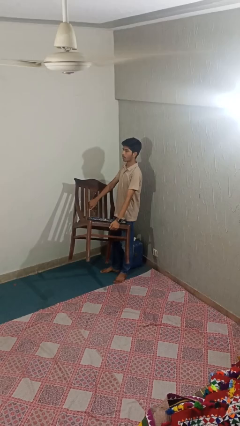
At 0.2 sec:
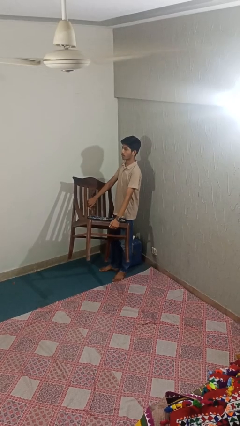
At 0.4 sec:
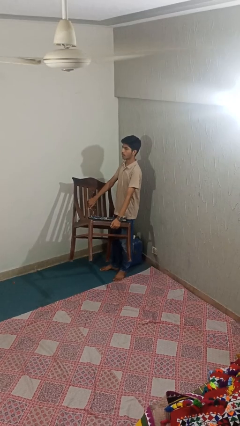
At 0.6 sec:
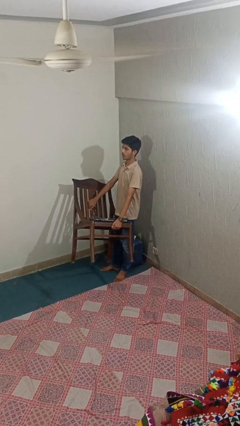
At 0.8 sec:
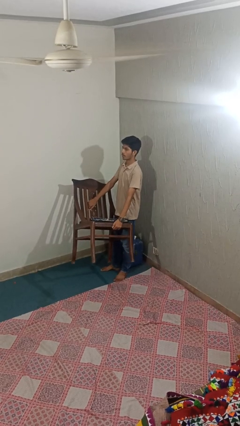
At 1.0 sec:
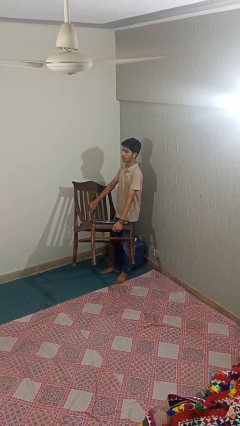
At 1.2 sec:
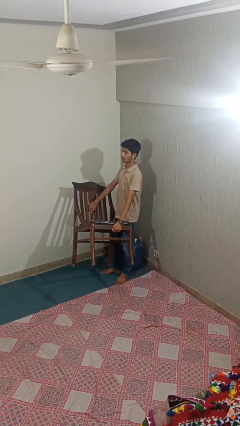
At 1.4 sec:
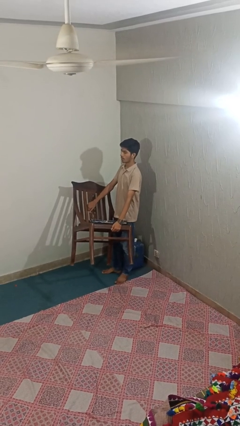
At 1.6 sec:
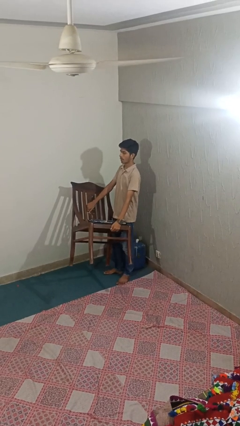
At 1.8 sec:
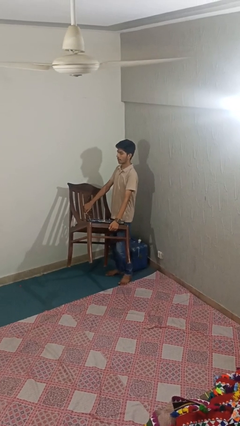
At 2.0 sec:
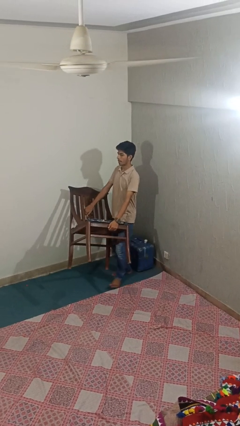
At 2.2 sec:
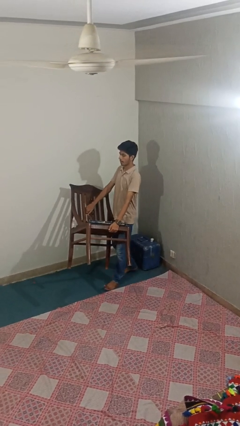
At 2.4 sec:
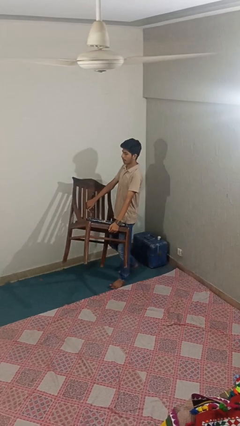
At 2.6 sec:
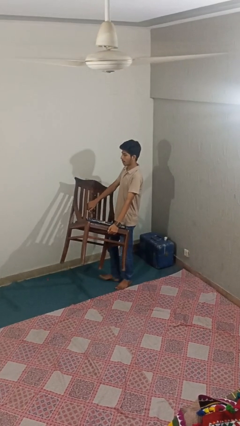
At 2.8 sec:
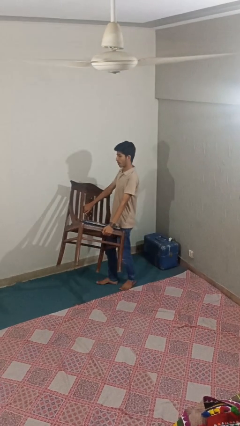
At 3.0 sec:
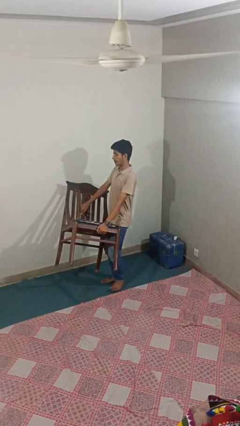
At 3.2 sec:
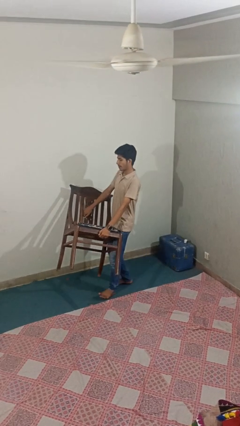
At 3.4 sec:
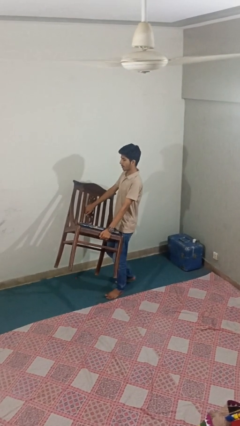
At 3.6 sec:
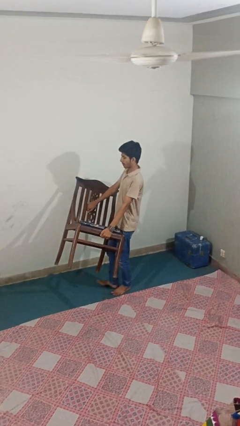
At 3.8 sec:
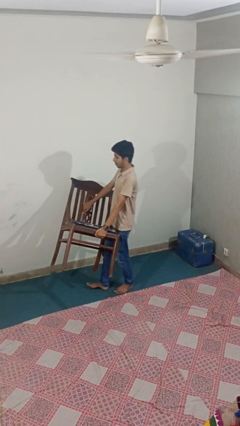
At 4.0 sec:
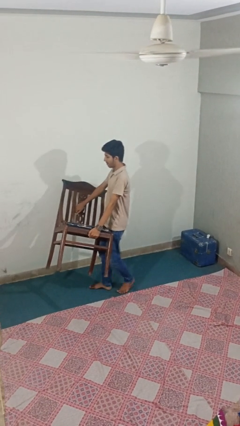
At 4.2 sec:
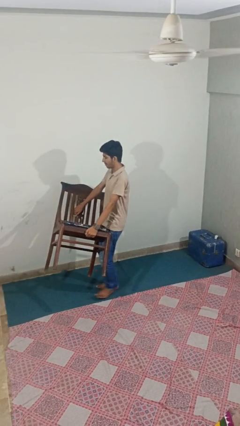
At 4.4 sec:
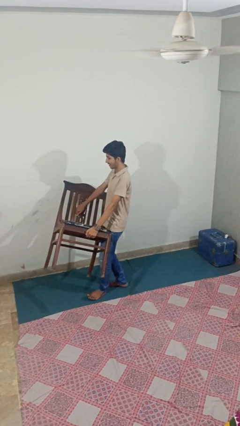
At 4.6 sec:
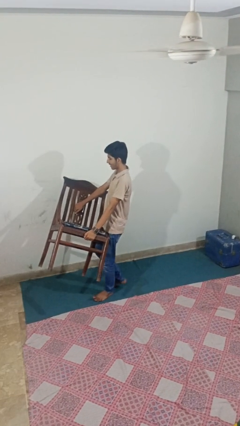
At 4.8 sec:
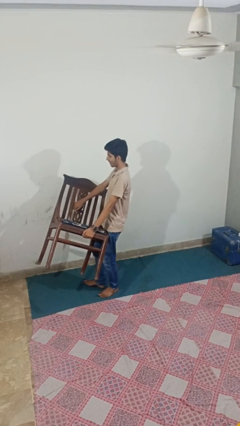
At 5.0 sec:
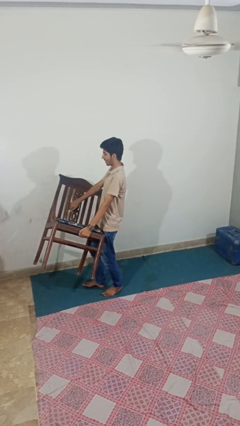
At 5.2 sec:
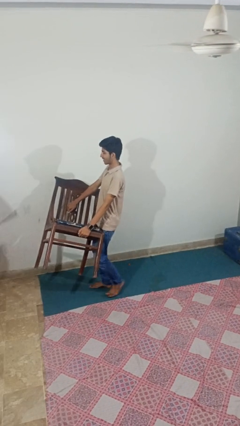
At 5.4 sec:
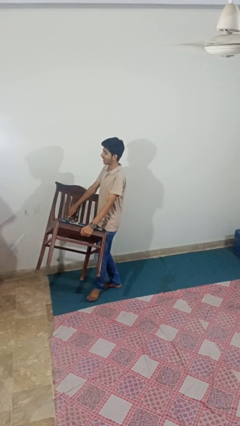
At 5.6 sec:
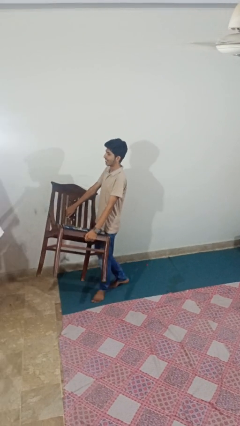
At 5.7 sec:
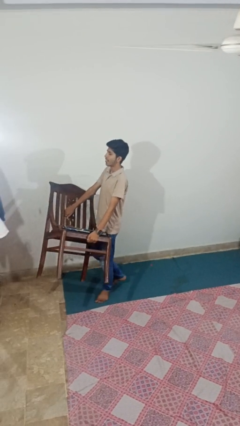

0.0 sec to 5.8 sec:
person carries furniture

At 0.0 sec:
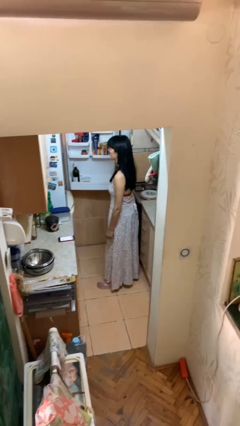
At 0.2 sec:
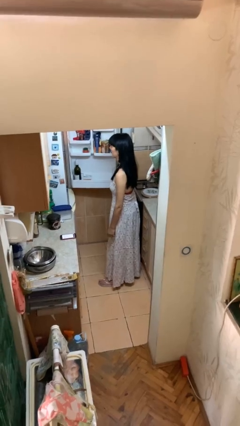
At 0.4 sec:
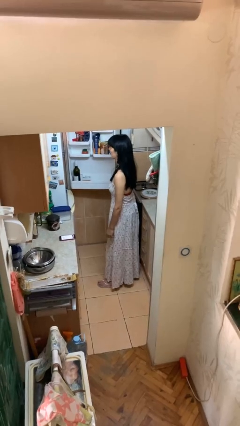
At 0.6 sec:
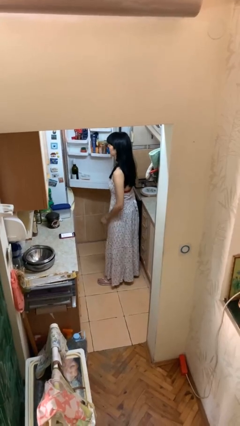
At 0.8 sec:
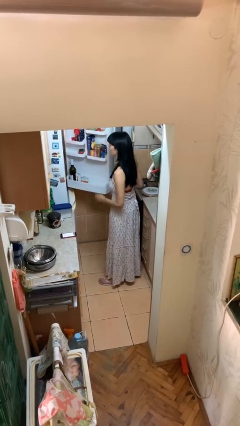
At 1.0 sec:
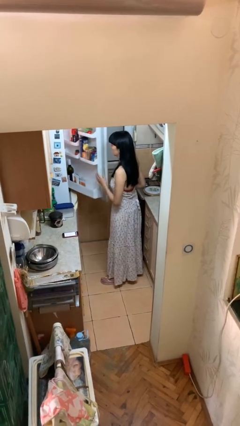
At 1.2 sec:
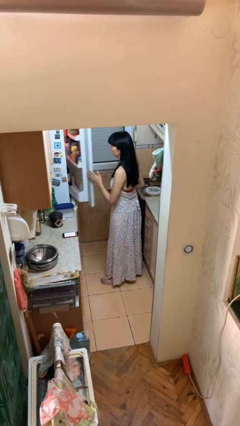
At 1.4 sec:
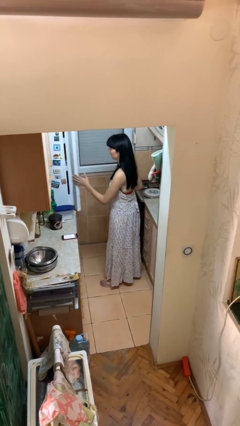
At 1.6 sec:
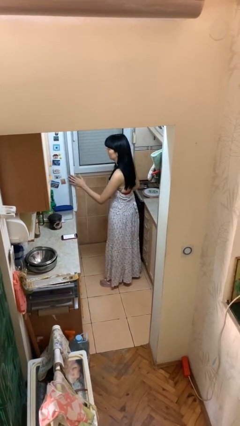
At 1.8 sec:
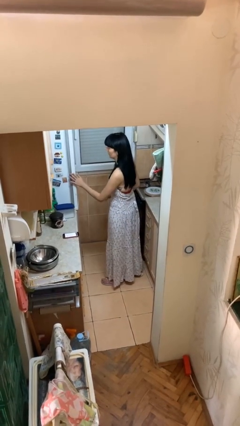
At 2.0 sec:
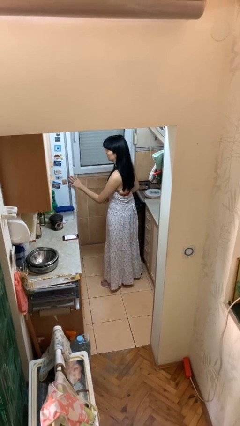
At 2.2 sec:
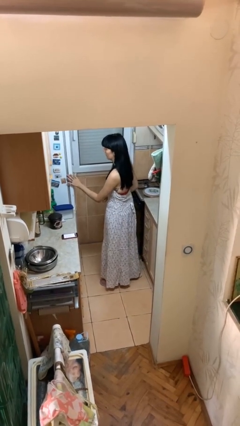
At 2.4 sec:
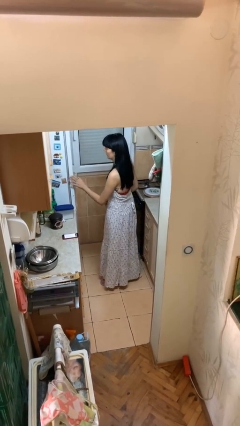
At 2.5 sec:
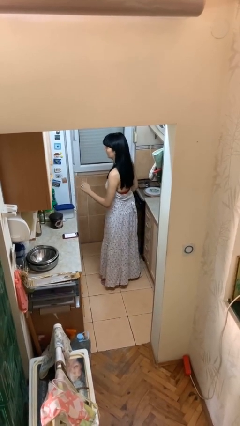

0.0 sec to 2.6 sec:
person closes refrigerator

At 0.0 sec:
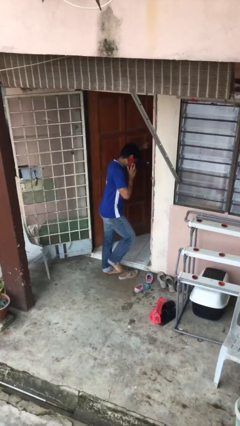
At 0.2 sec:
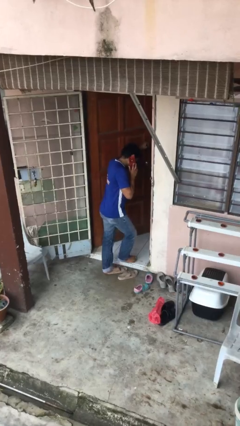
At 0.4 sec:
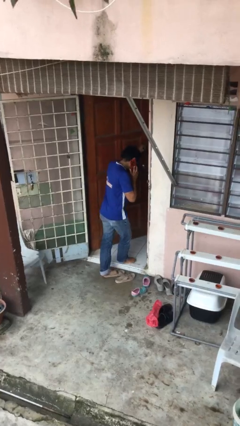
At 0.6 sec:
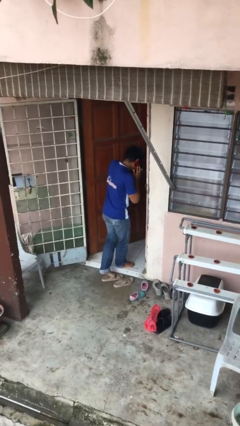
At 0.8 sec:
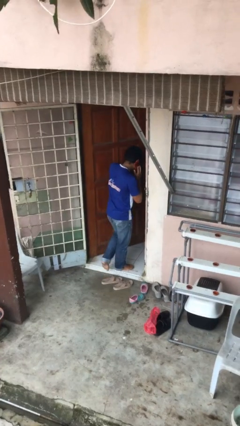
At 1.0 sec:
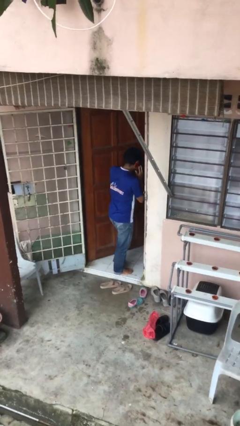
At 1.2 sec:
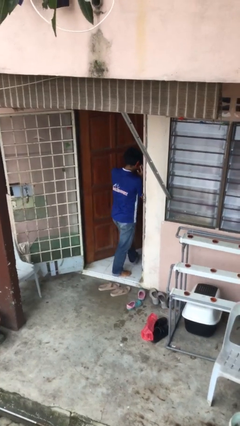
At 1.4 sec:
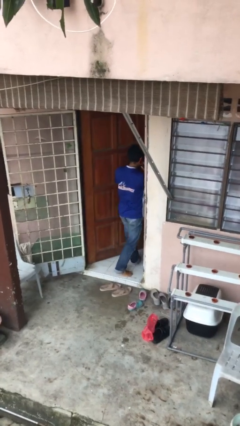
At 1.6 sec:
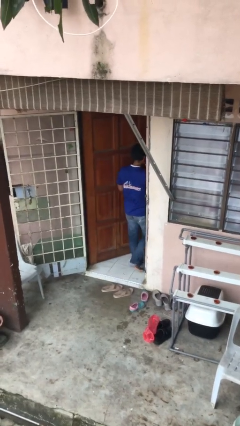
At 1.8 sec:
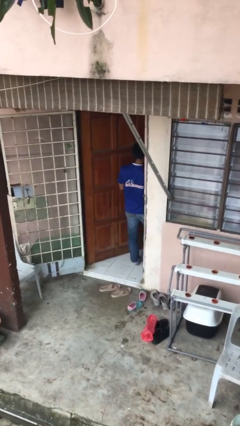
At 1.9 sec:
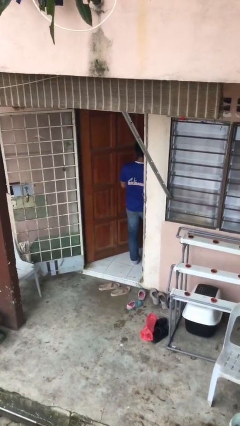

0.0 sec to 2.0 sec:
person exits scene through structure

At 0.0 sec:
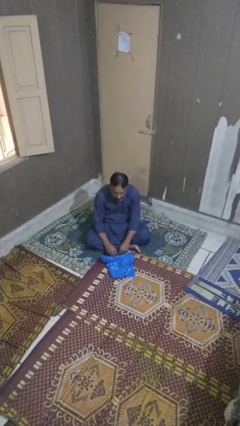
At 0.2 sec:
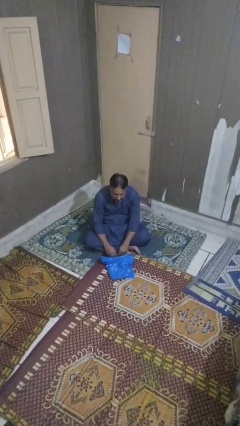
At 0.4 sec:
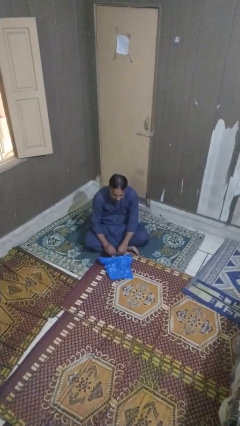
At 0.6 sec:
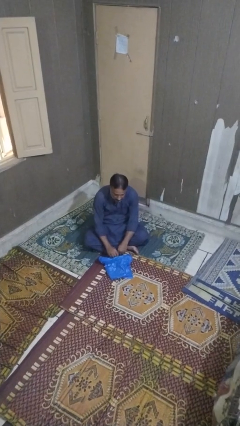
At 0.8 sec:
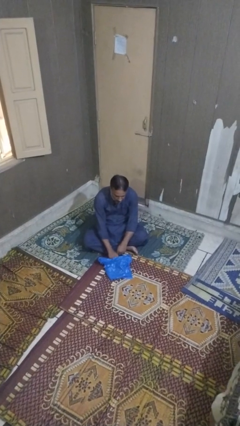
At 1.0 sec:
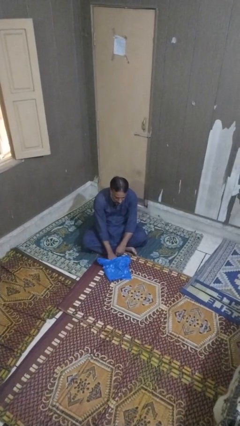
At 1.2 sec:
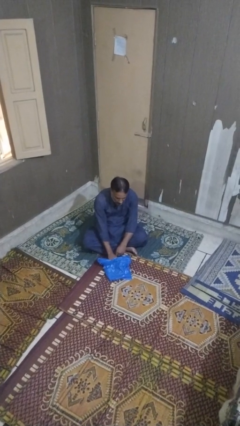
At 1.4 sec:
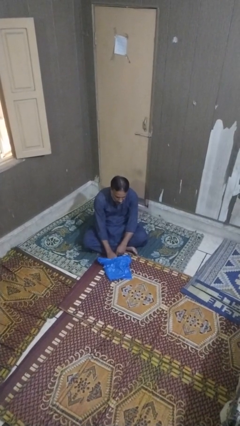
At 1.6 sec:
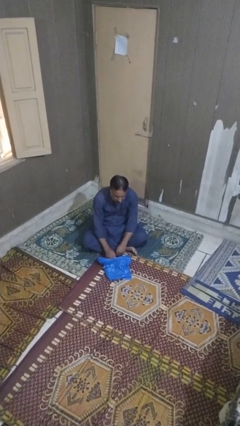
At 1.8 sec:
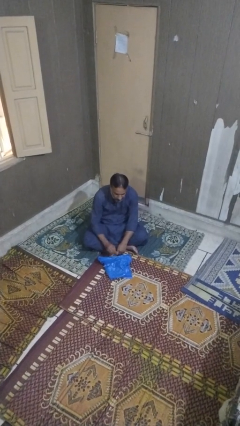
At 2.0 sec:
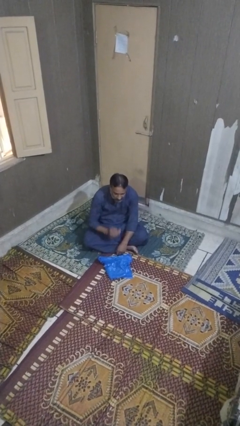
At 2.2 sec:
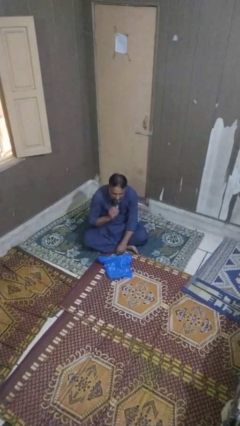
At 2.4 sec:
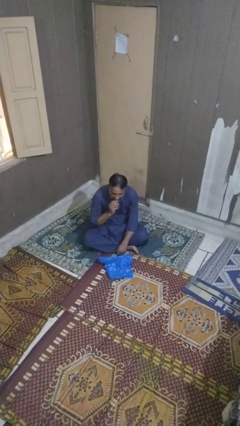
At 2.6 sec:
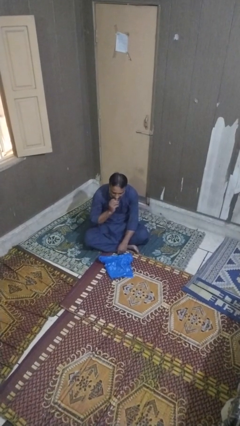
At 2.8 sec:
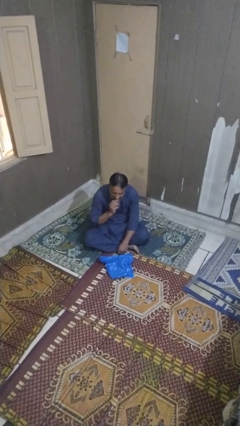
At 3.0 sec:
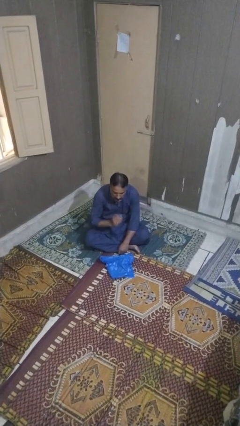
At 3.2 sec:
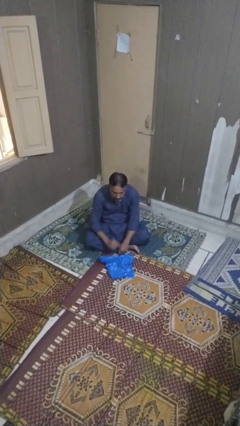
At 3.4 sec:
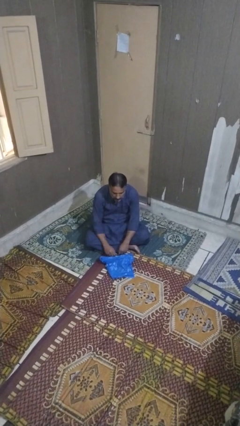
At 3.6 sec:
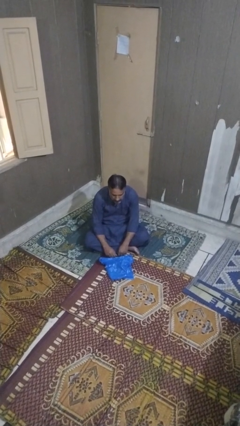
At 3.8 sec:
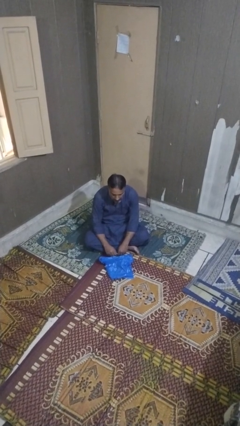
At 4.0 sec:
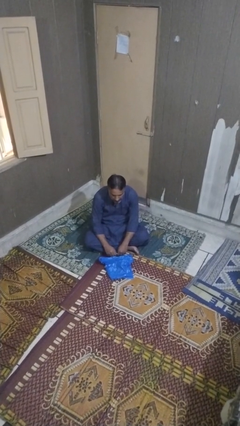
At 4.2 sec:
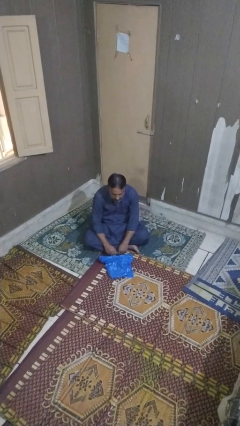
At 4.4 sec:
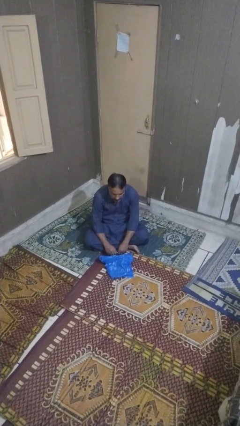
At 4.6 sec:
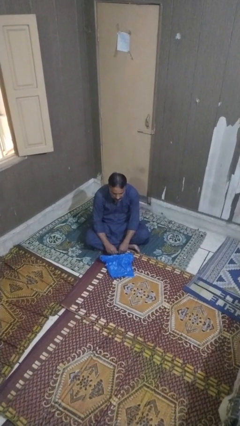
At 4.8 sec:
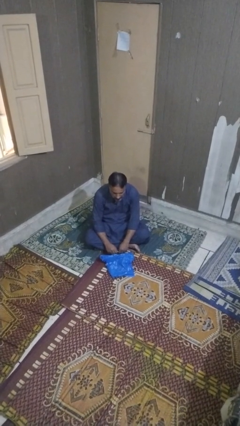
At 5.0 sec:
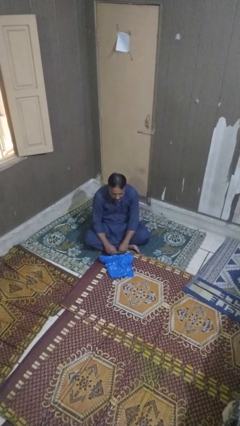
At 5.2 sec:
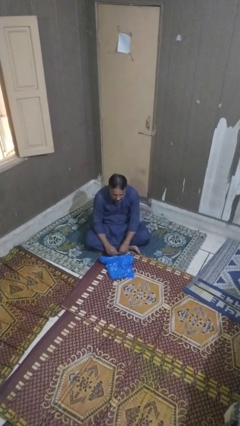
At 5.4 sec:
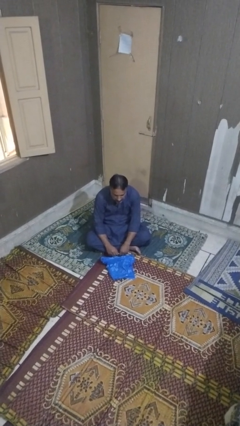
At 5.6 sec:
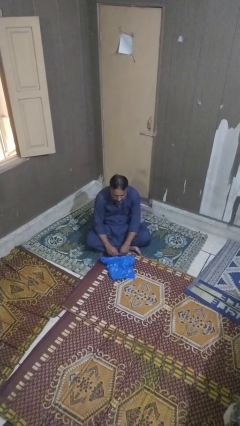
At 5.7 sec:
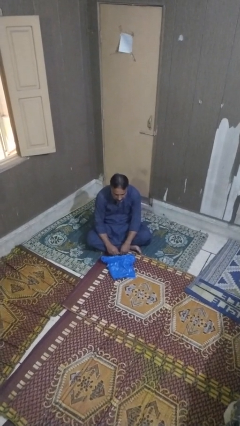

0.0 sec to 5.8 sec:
person eats snack from bag

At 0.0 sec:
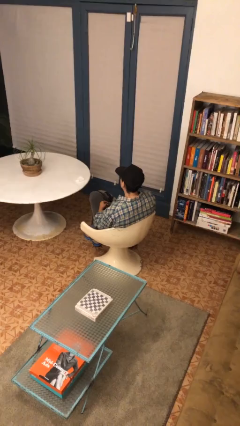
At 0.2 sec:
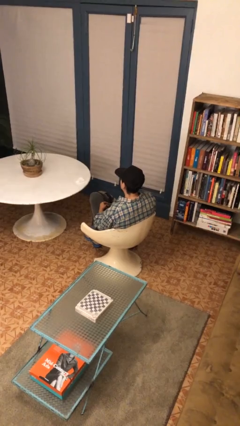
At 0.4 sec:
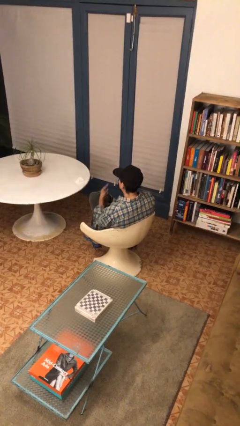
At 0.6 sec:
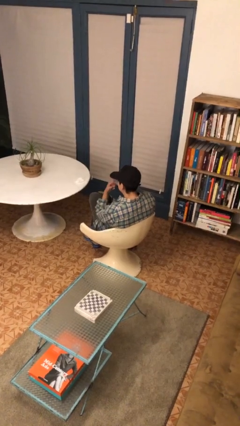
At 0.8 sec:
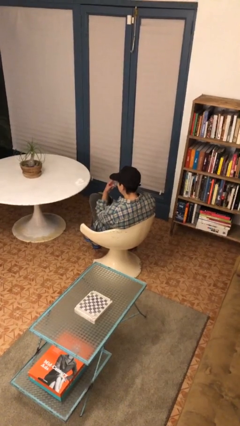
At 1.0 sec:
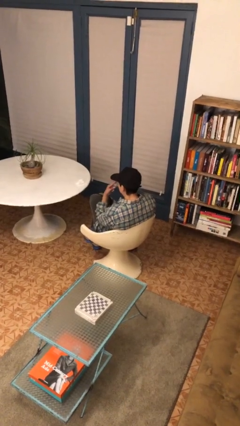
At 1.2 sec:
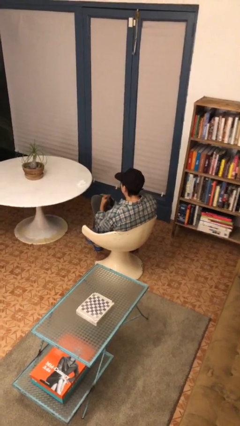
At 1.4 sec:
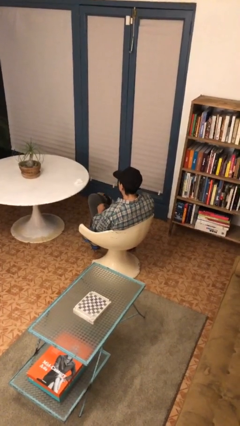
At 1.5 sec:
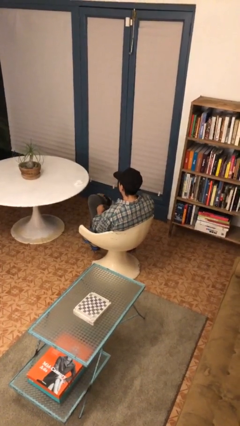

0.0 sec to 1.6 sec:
person gestures watch closely
